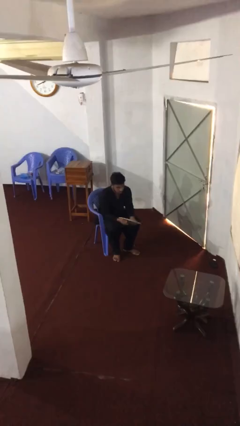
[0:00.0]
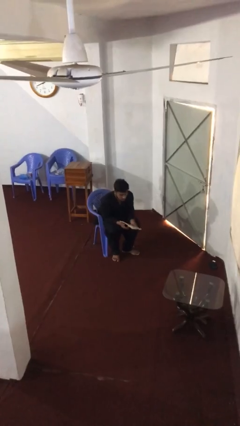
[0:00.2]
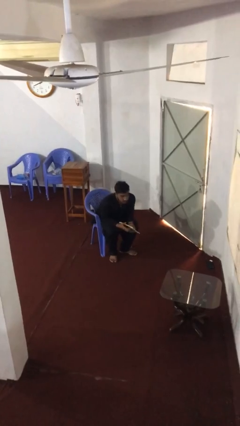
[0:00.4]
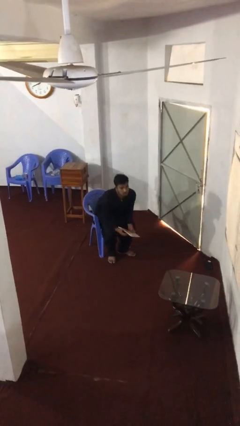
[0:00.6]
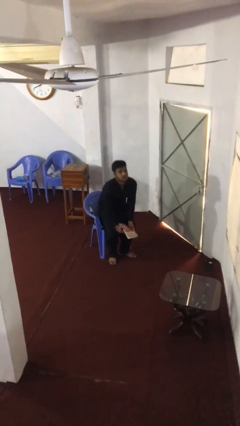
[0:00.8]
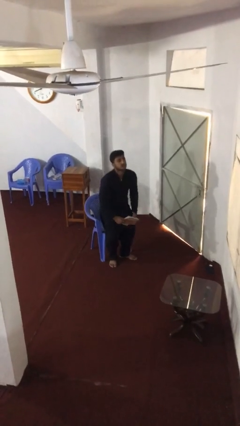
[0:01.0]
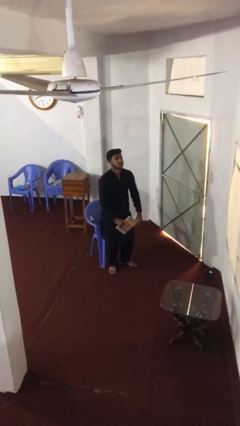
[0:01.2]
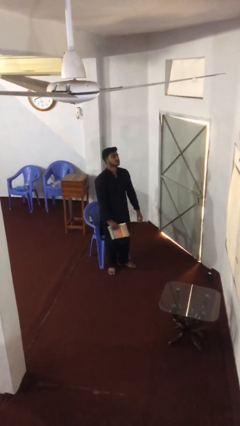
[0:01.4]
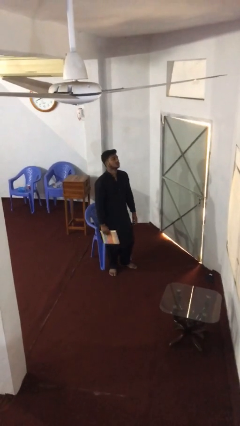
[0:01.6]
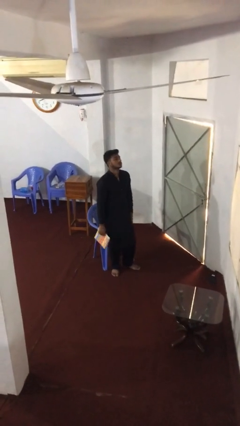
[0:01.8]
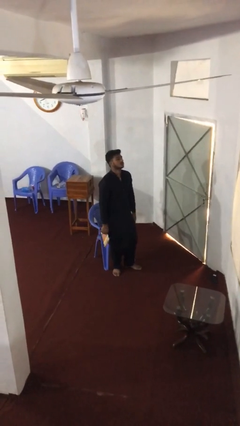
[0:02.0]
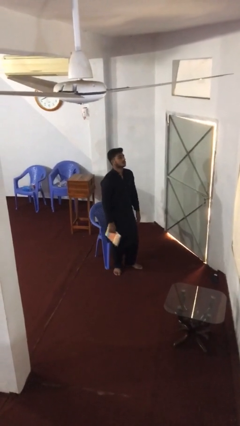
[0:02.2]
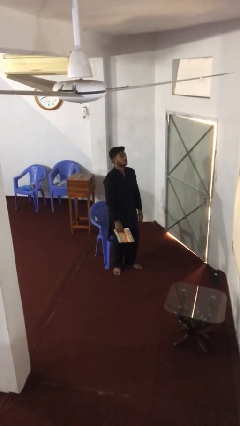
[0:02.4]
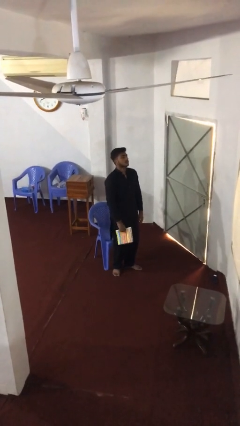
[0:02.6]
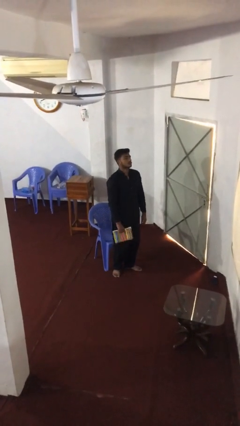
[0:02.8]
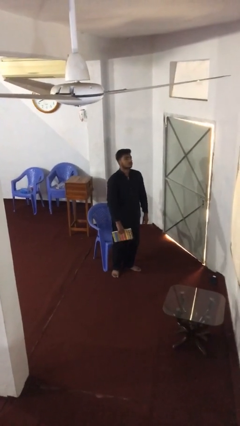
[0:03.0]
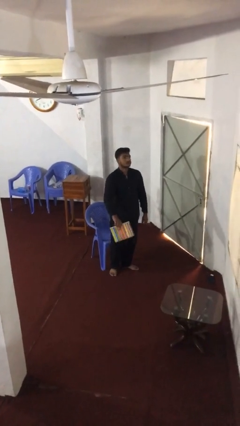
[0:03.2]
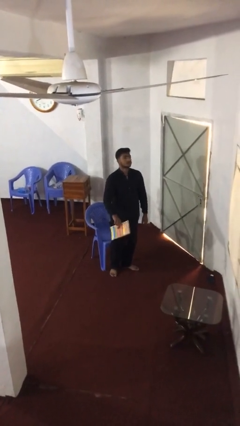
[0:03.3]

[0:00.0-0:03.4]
person stands up

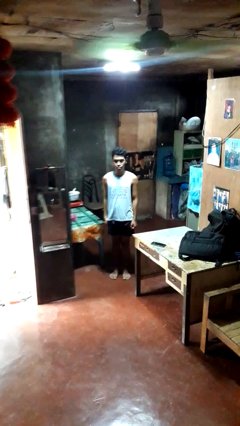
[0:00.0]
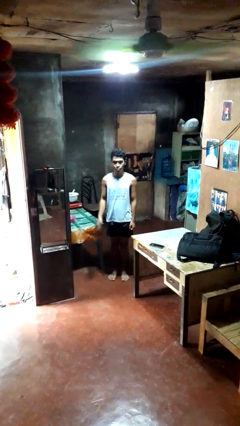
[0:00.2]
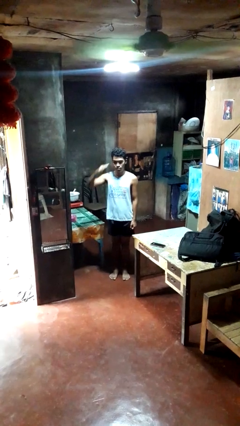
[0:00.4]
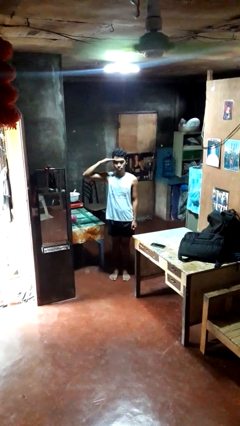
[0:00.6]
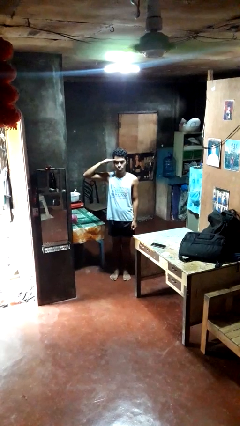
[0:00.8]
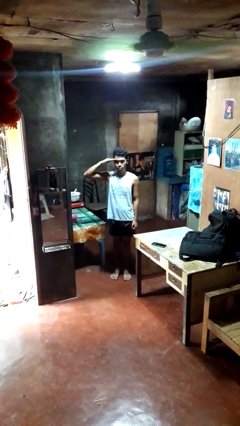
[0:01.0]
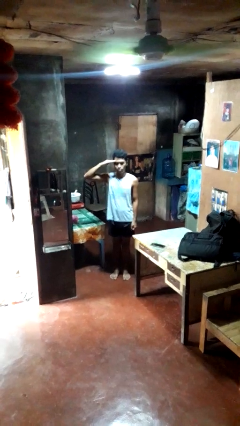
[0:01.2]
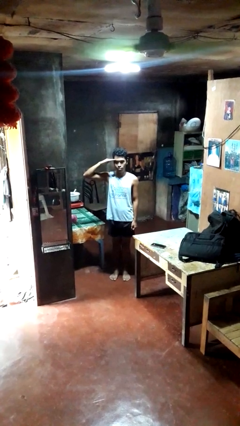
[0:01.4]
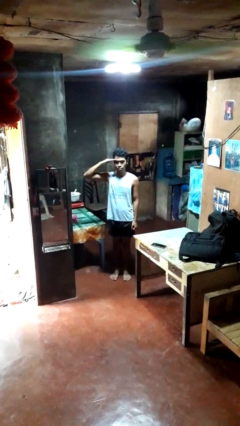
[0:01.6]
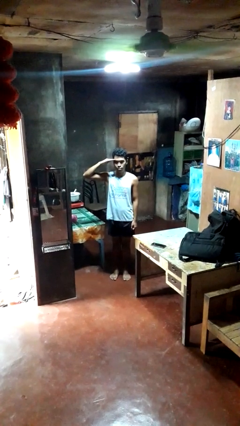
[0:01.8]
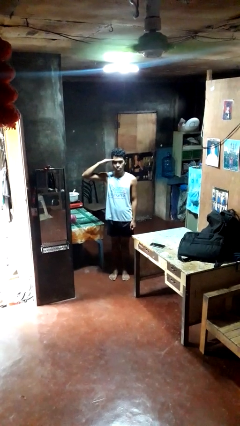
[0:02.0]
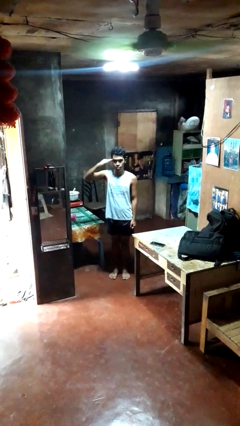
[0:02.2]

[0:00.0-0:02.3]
person salutes

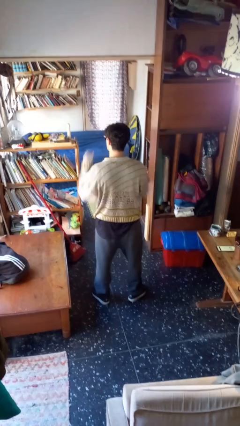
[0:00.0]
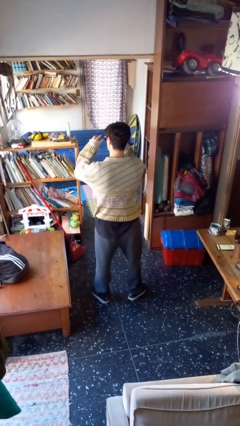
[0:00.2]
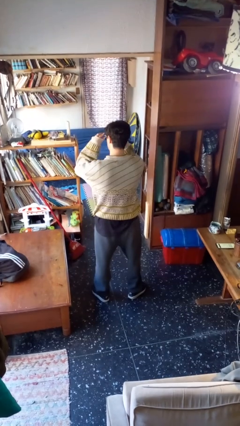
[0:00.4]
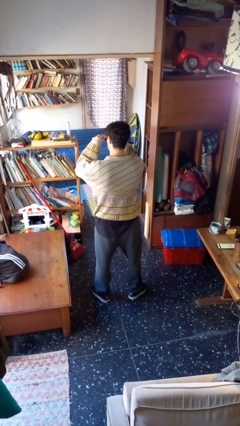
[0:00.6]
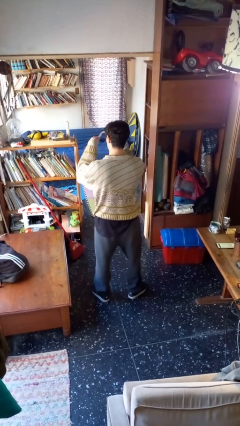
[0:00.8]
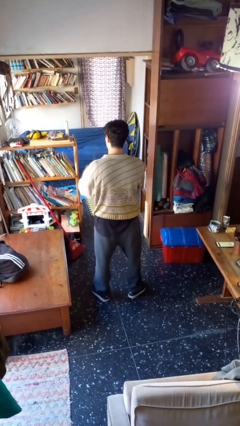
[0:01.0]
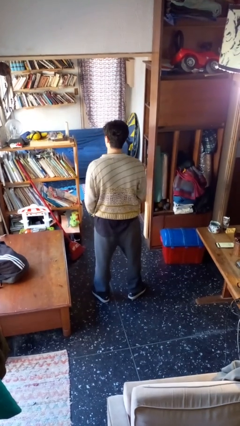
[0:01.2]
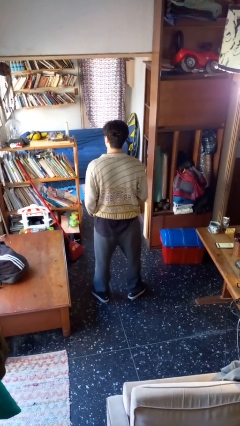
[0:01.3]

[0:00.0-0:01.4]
person takes off sunglasses

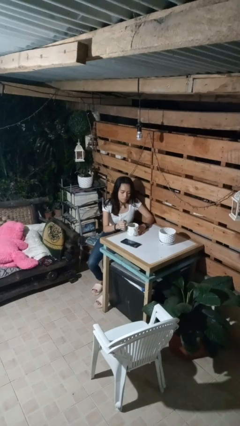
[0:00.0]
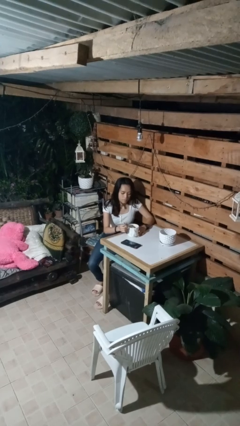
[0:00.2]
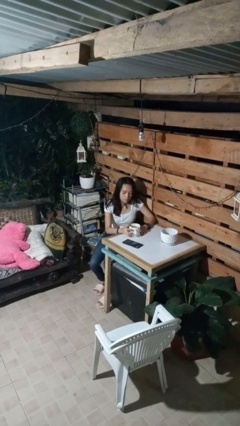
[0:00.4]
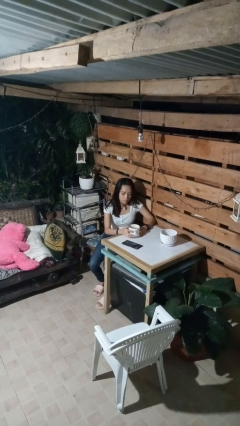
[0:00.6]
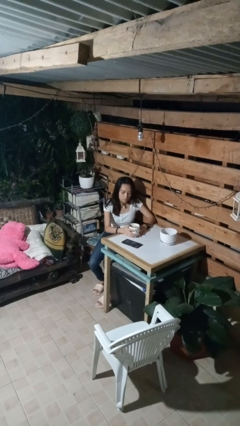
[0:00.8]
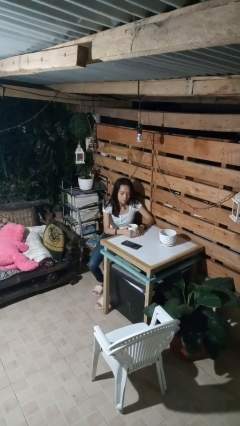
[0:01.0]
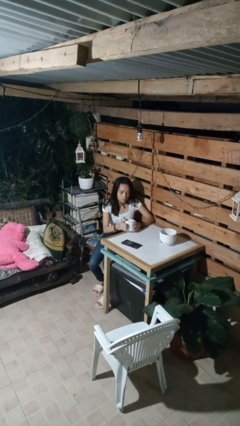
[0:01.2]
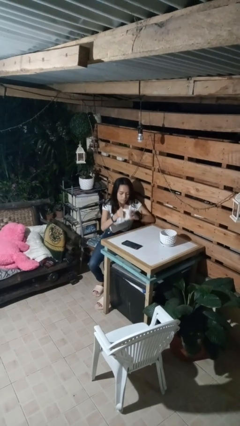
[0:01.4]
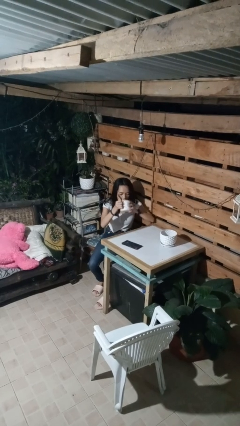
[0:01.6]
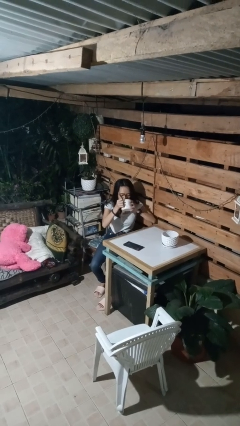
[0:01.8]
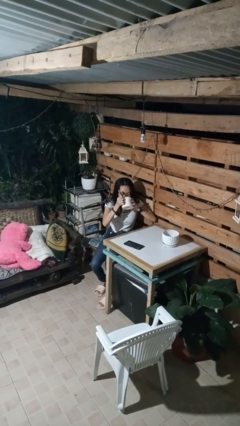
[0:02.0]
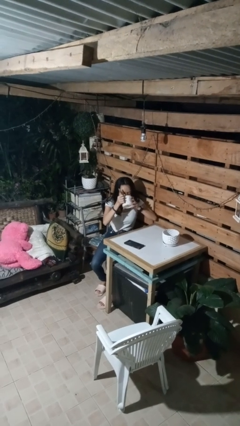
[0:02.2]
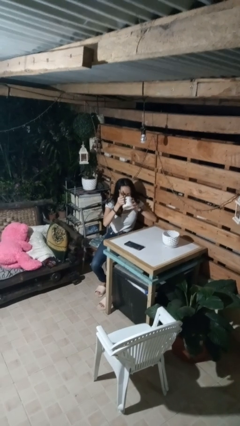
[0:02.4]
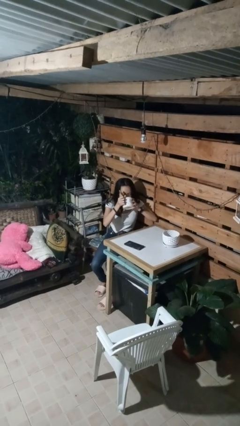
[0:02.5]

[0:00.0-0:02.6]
person drinks from mug

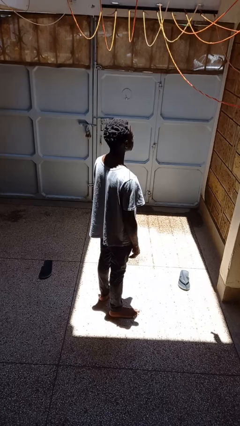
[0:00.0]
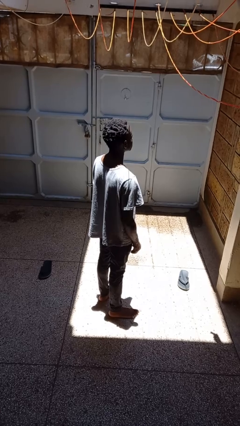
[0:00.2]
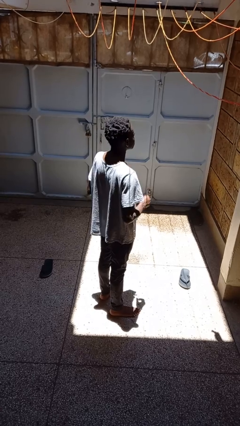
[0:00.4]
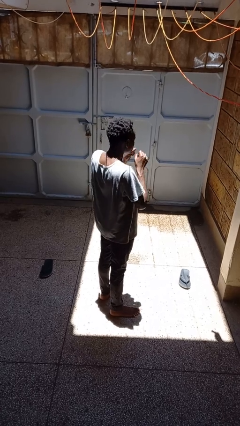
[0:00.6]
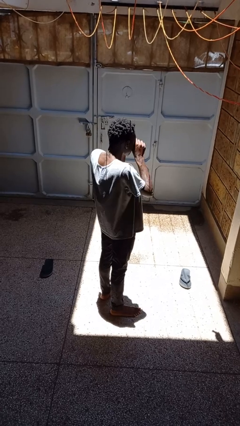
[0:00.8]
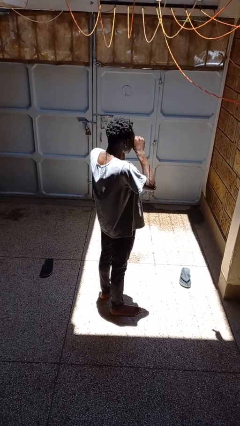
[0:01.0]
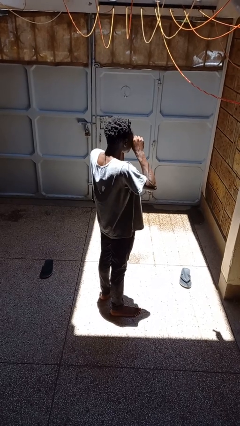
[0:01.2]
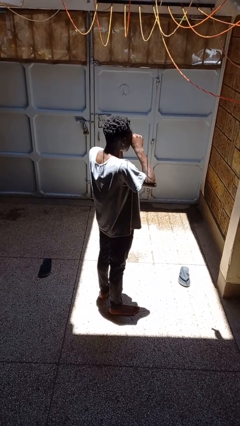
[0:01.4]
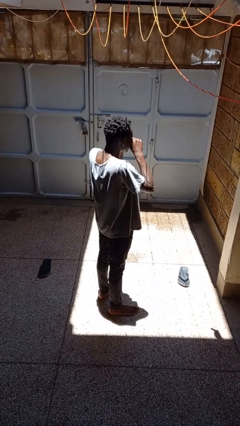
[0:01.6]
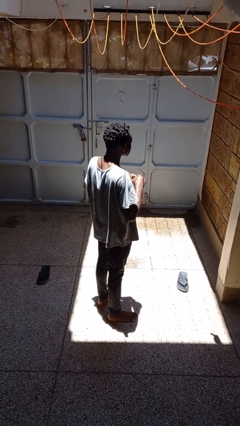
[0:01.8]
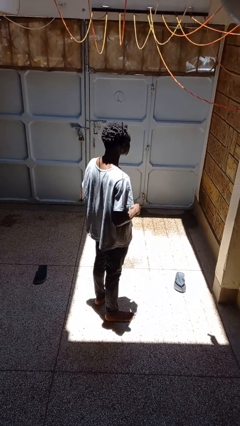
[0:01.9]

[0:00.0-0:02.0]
person rubs eyes

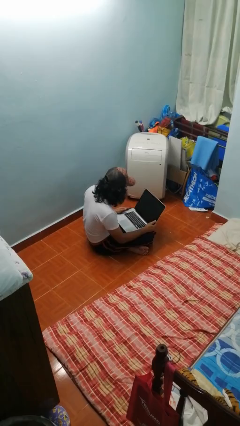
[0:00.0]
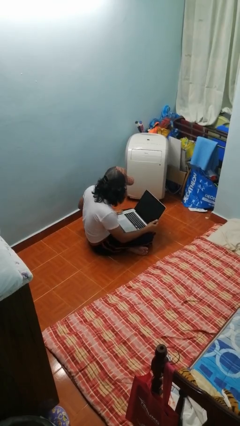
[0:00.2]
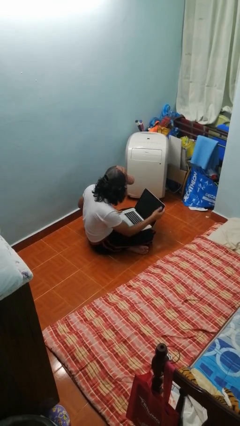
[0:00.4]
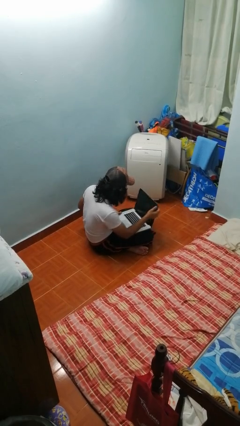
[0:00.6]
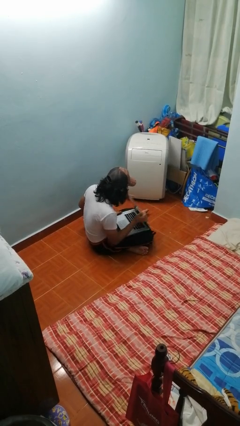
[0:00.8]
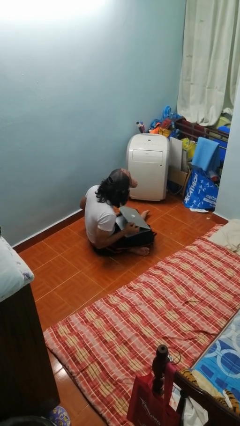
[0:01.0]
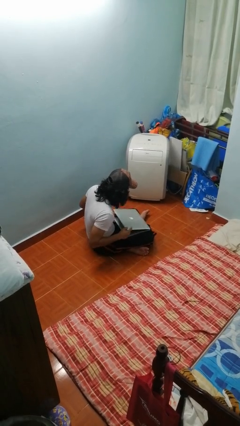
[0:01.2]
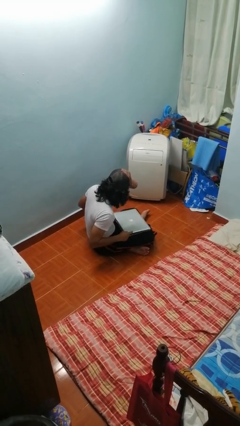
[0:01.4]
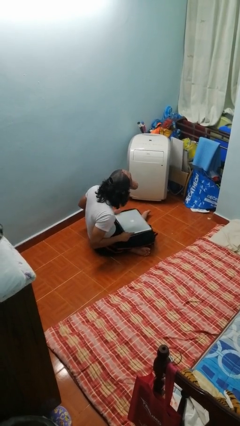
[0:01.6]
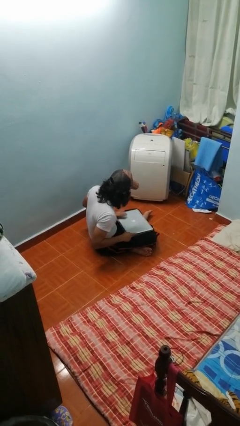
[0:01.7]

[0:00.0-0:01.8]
person closes laptop

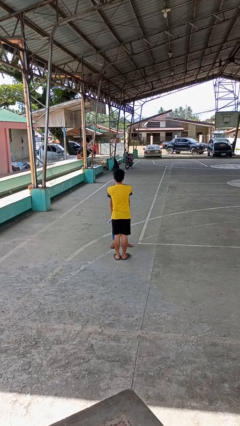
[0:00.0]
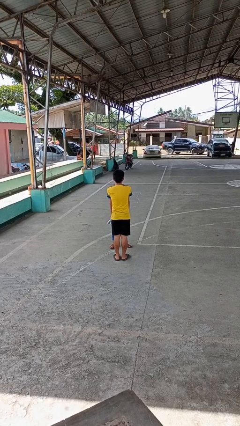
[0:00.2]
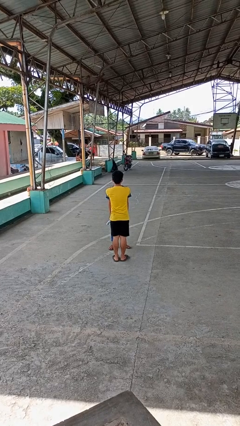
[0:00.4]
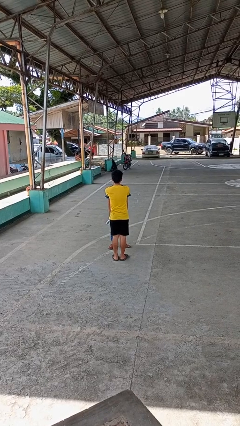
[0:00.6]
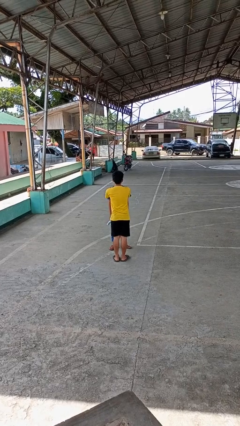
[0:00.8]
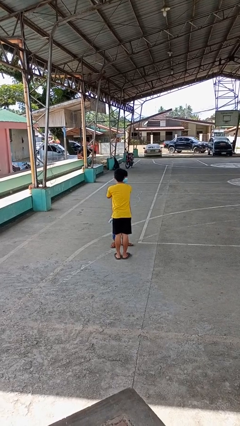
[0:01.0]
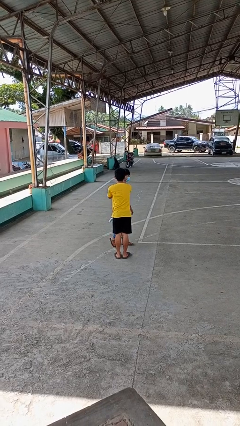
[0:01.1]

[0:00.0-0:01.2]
person grabs person by shoulder

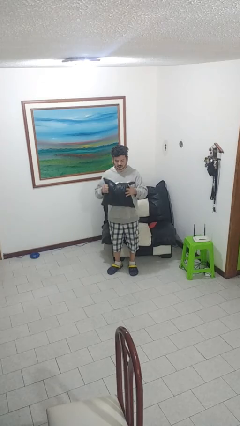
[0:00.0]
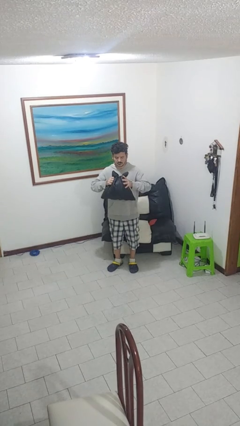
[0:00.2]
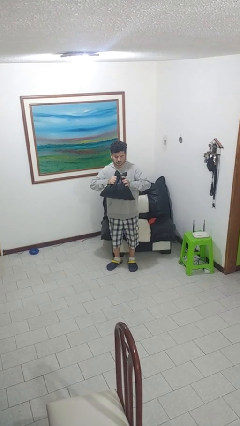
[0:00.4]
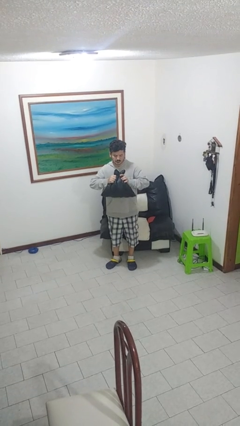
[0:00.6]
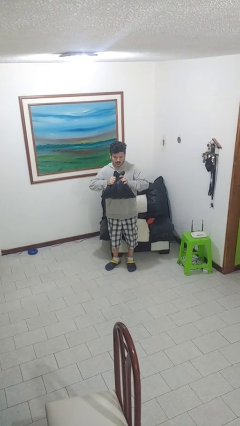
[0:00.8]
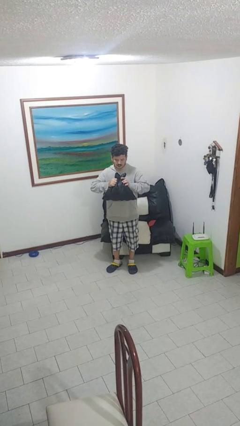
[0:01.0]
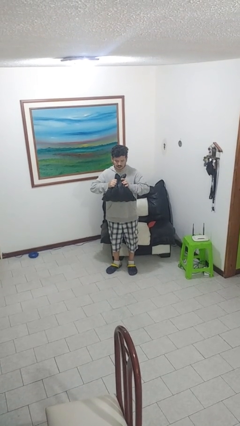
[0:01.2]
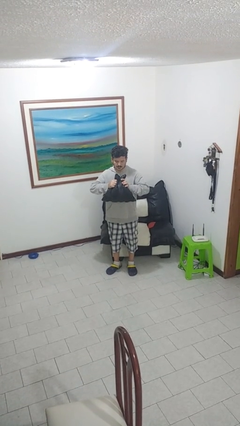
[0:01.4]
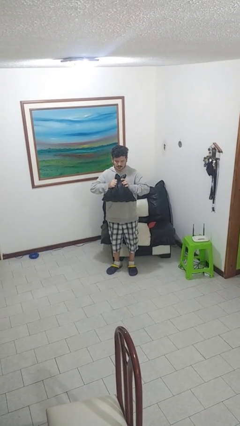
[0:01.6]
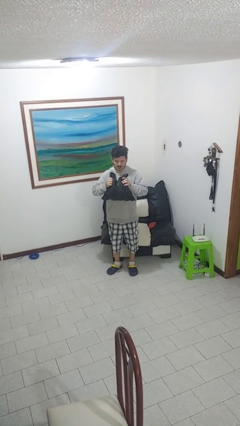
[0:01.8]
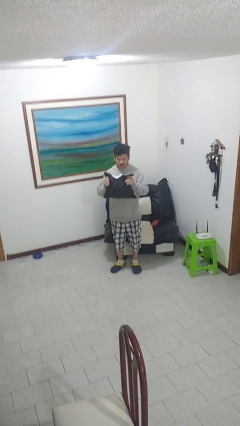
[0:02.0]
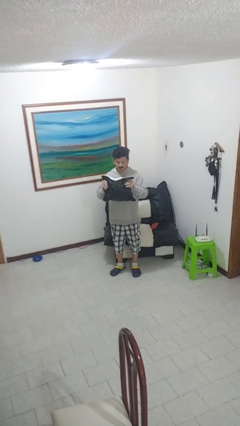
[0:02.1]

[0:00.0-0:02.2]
person squeezes object
